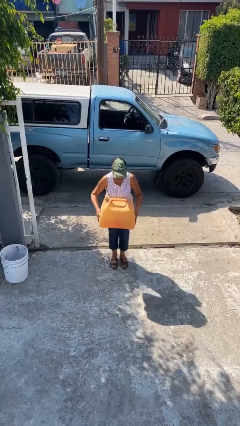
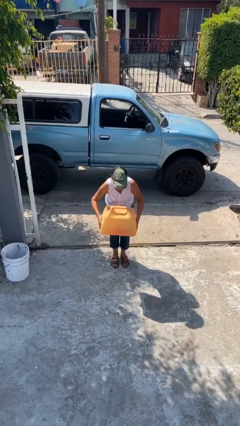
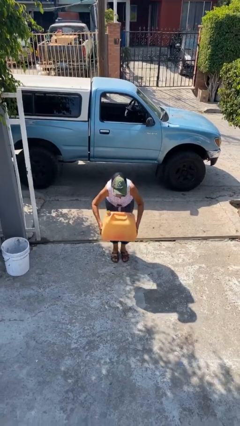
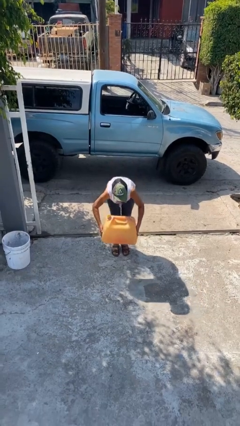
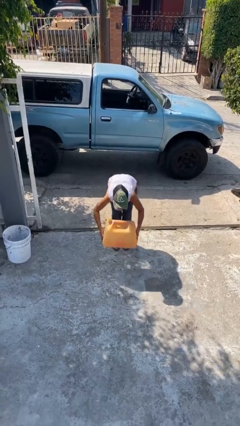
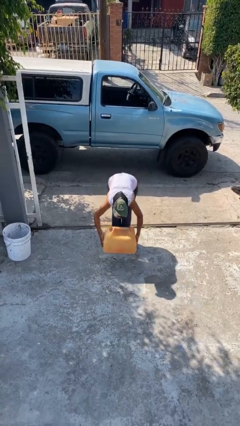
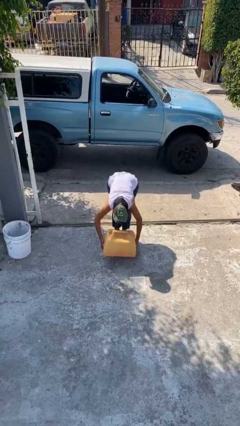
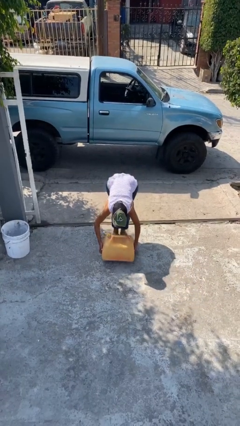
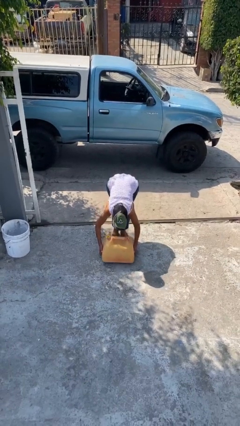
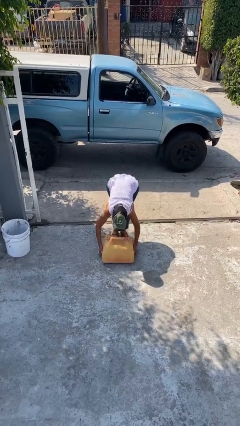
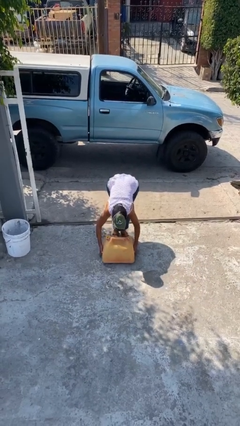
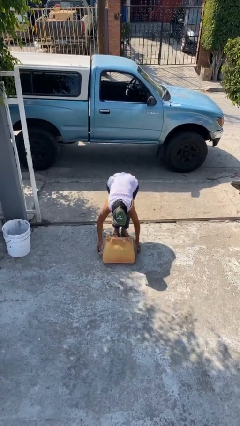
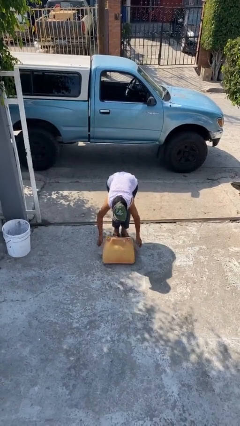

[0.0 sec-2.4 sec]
person puts down object on floor

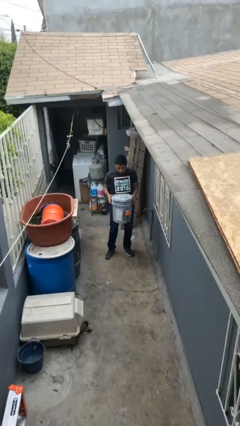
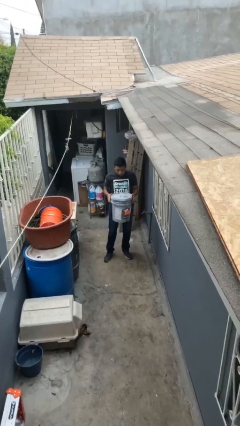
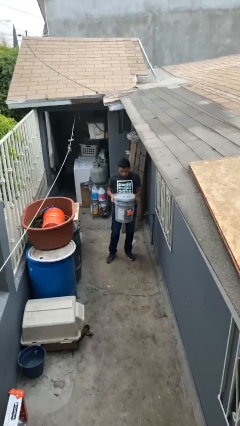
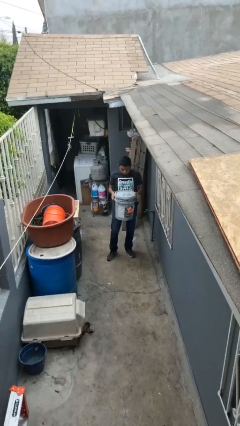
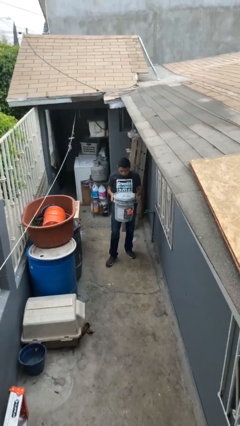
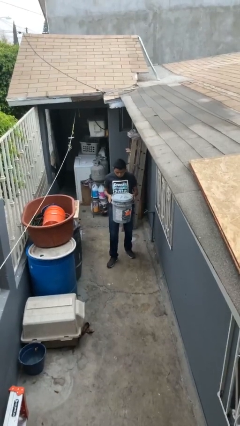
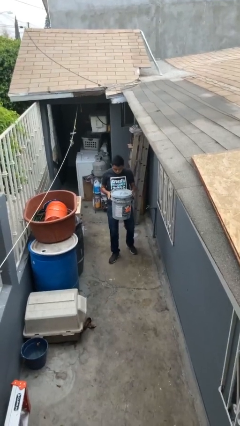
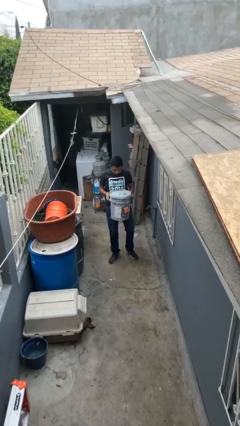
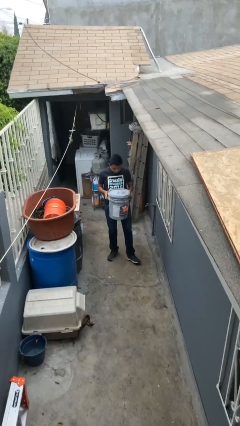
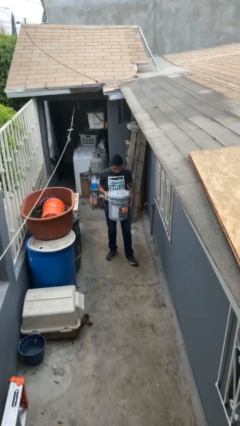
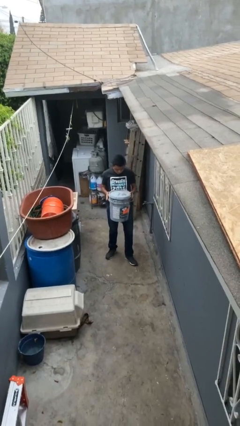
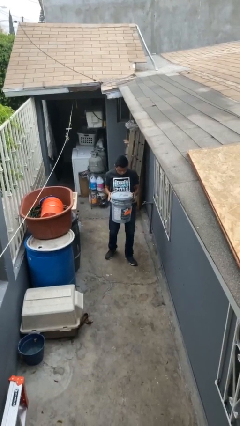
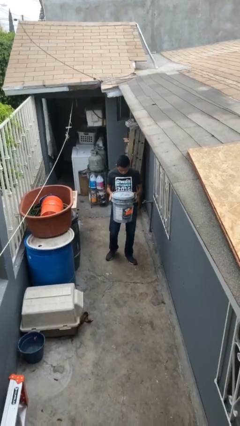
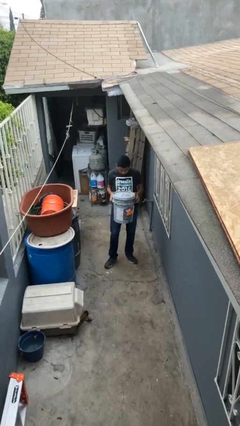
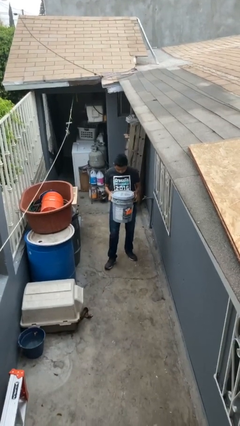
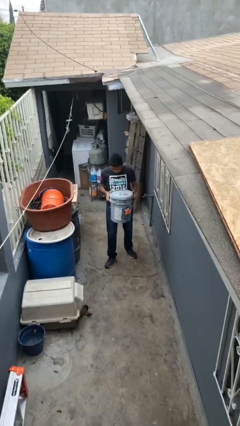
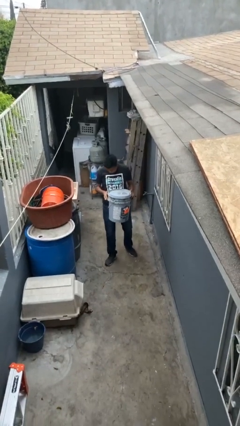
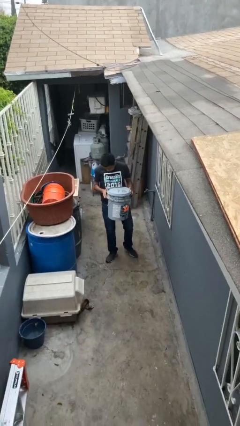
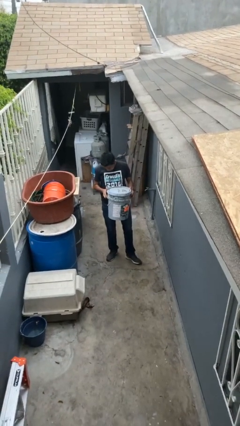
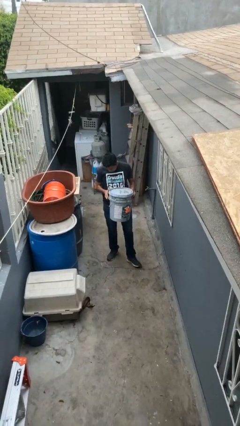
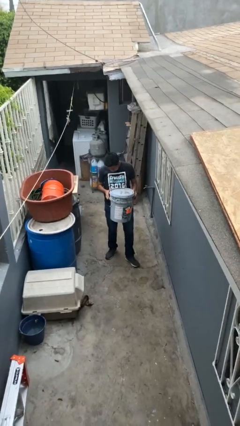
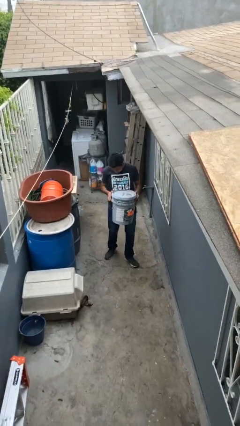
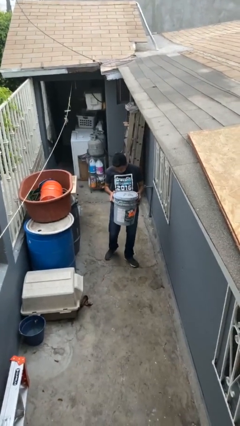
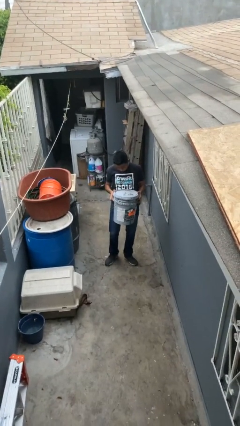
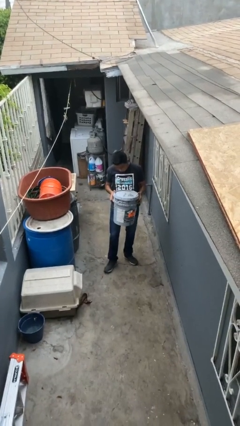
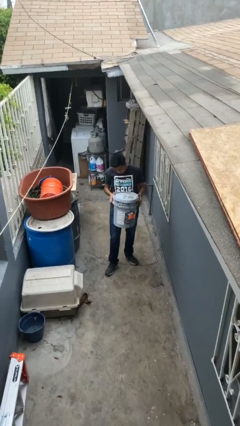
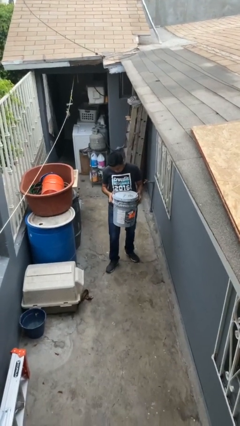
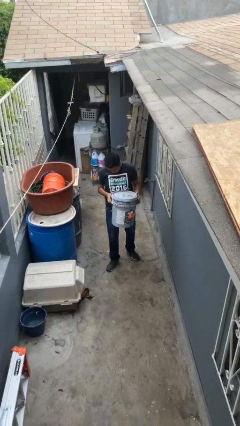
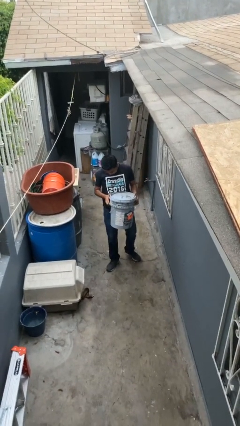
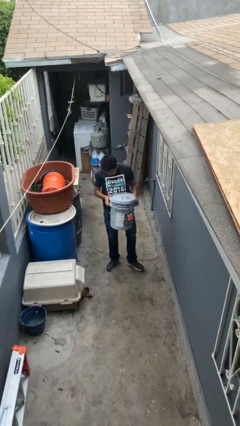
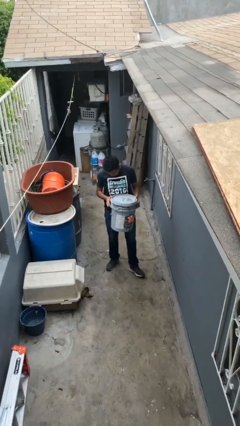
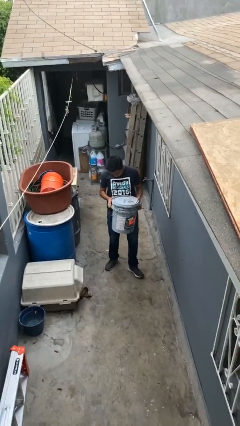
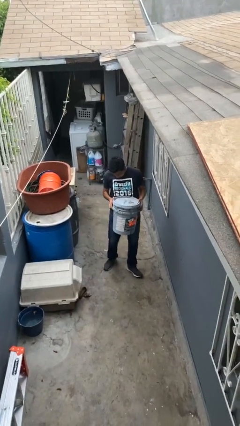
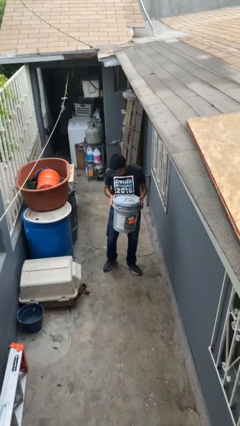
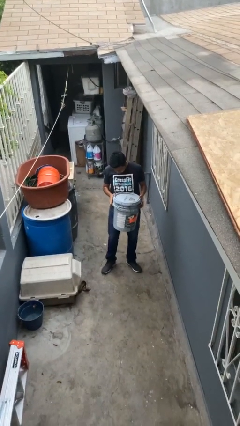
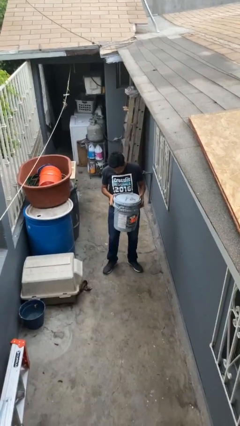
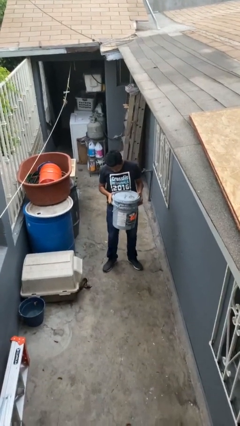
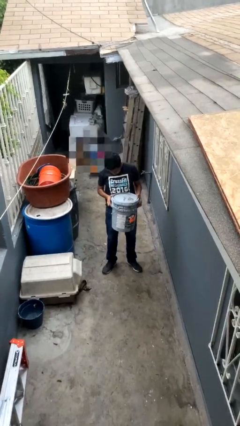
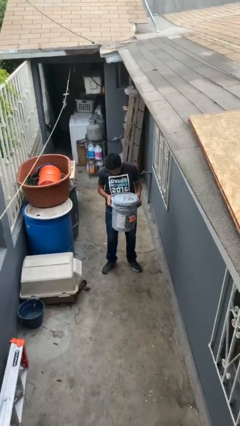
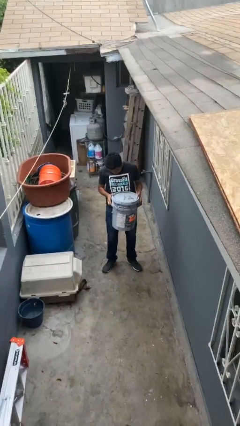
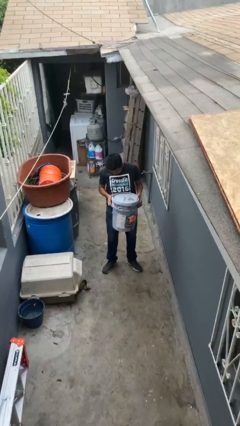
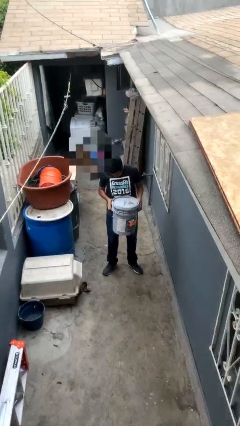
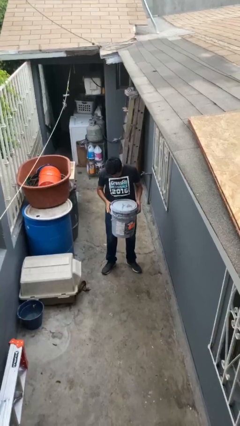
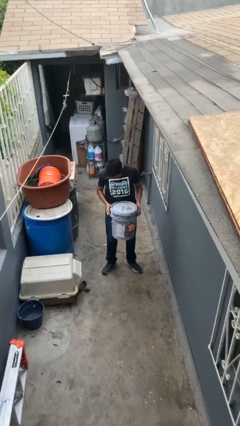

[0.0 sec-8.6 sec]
person carries heavy object

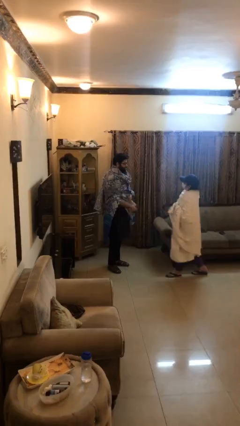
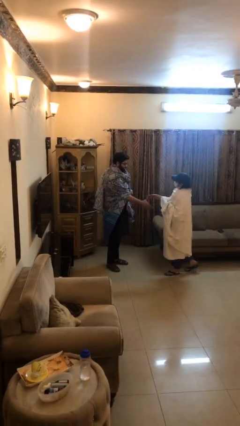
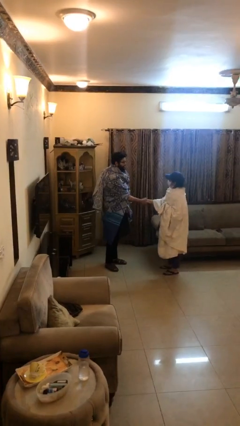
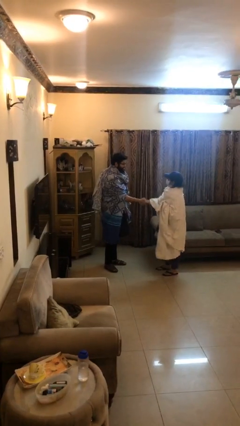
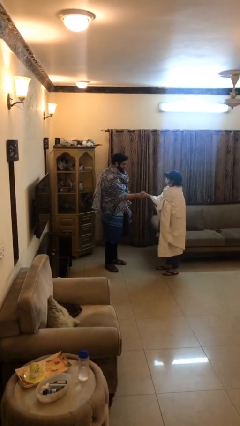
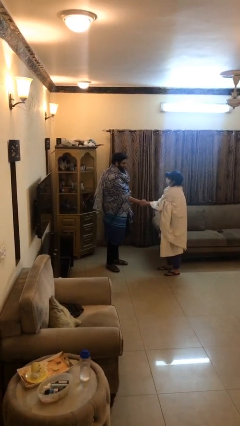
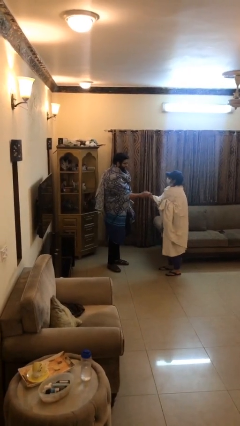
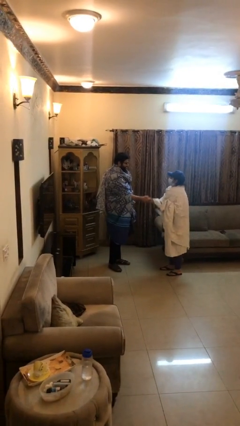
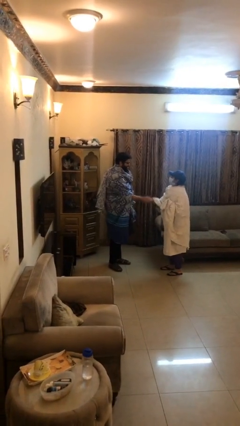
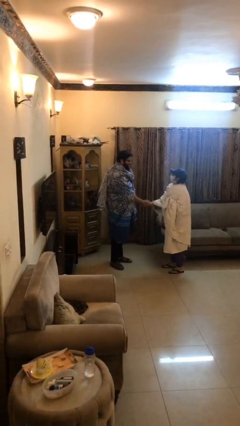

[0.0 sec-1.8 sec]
person shakes hand

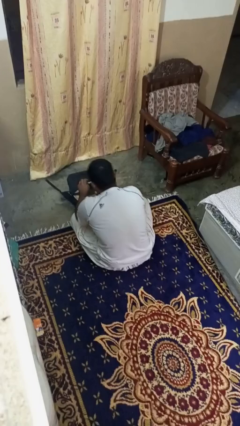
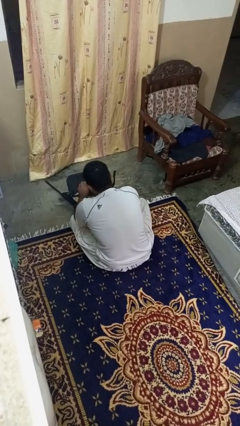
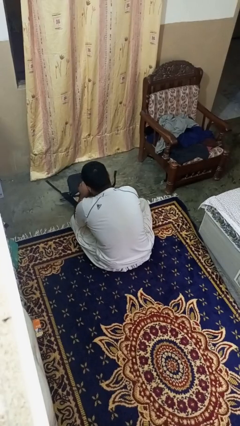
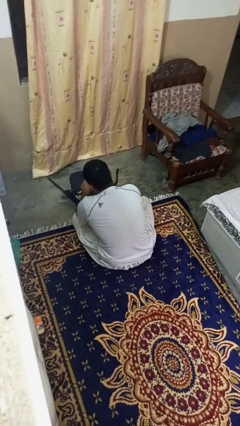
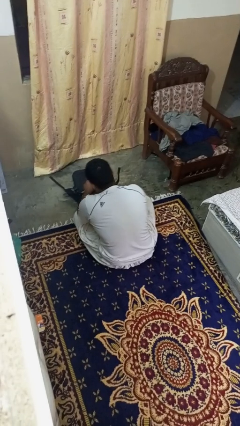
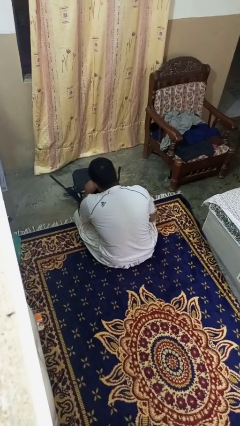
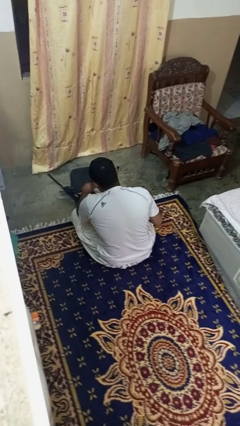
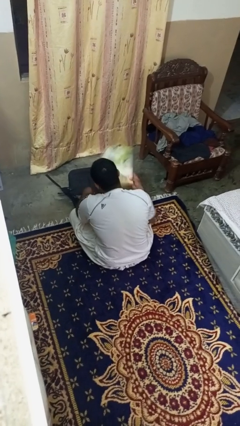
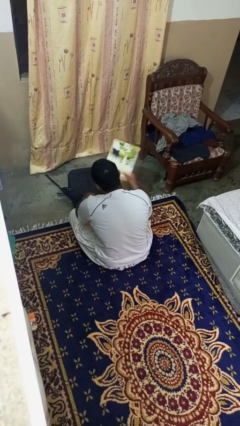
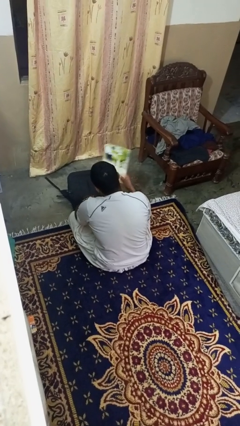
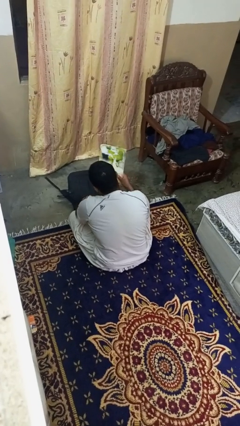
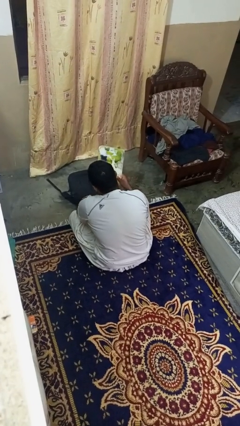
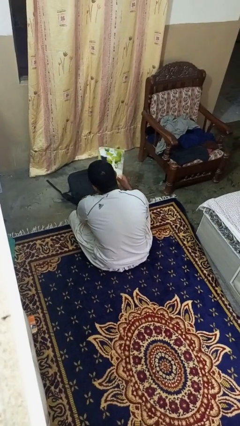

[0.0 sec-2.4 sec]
person takes object from bag

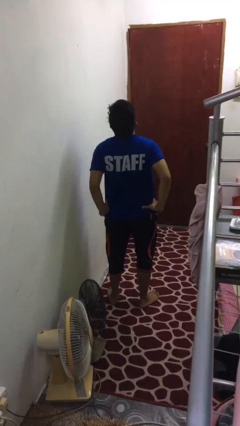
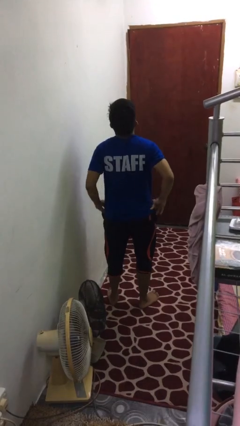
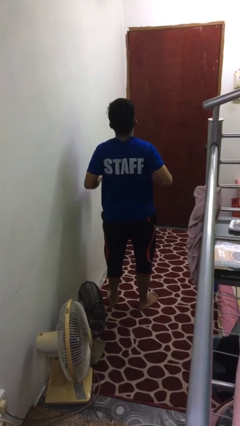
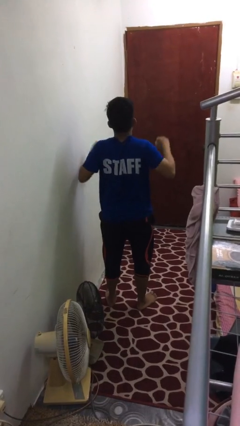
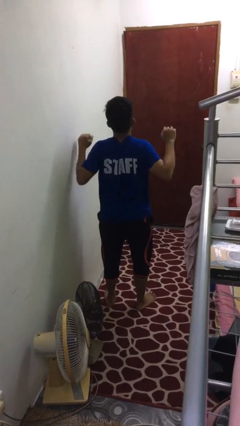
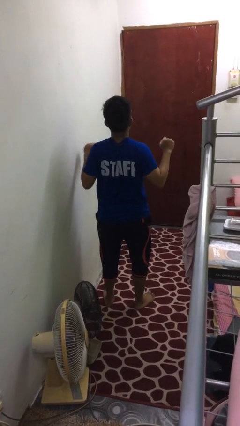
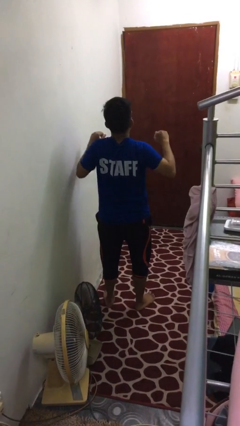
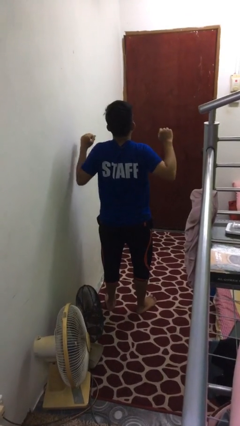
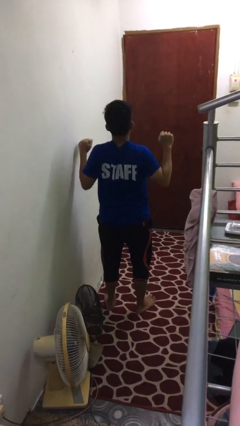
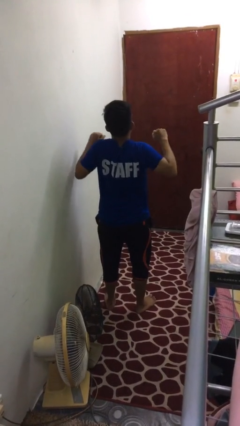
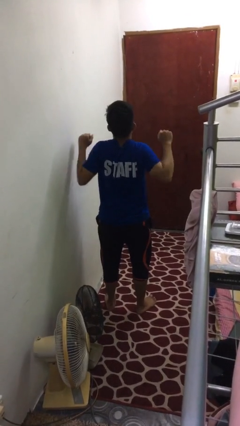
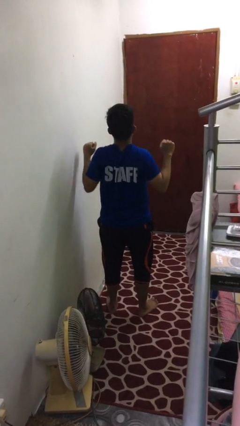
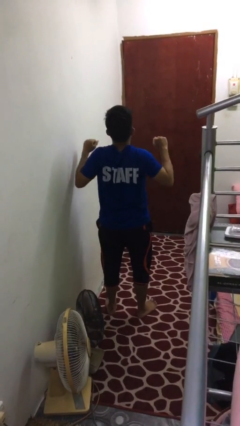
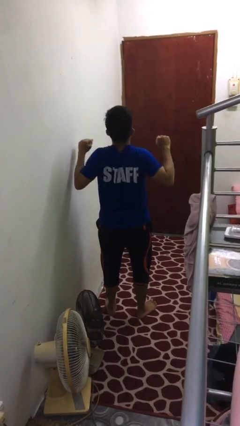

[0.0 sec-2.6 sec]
person stretches arms to side
